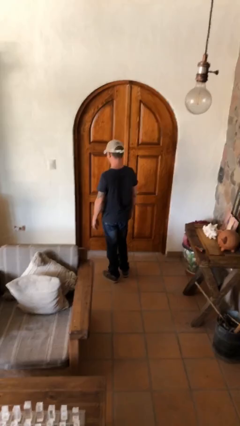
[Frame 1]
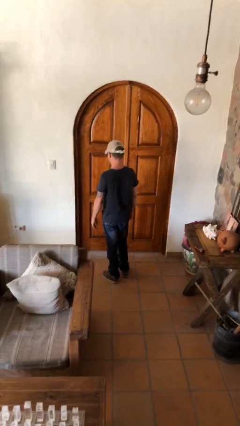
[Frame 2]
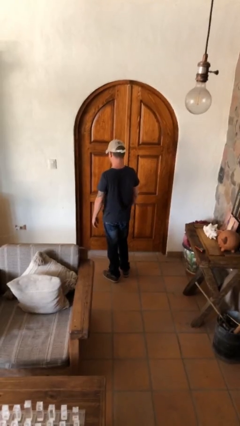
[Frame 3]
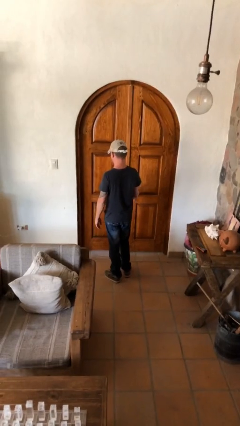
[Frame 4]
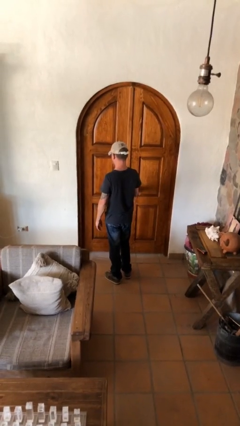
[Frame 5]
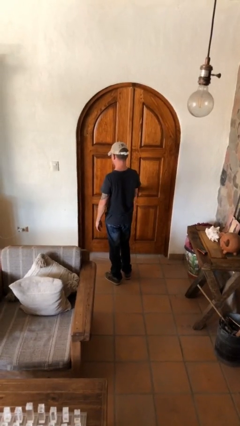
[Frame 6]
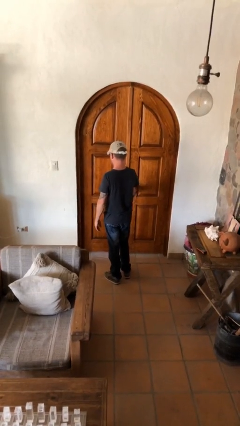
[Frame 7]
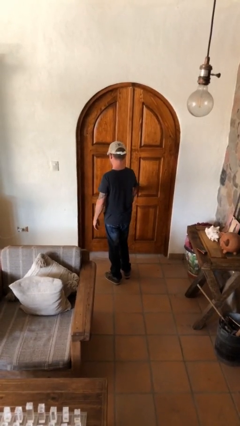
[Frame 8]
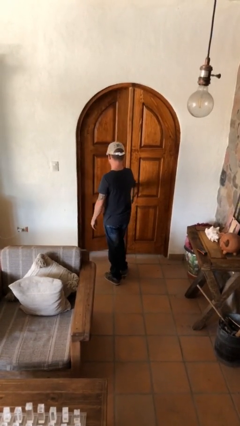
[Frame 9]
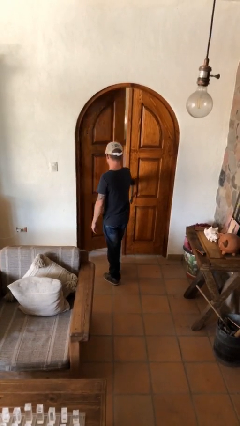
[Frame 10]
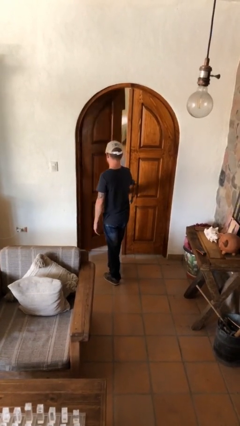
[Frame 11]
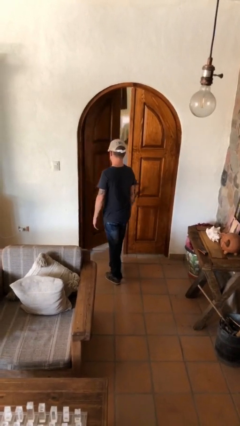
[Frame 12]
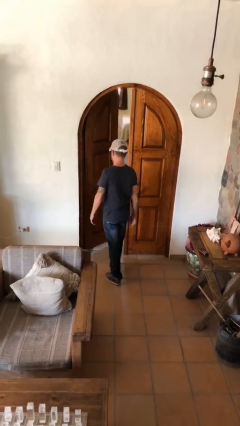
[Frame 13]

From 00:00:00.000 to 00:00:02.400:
person opens facility door

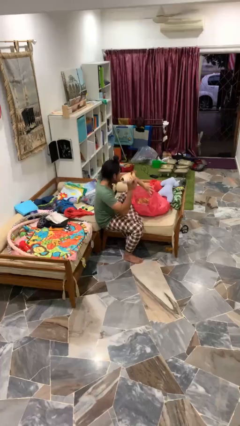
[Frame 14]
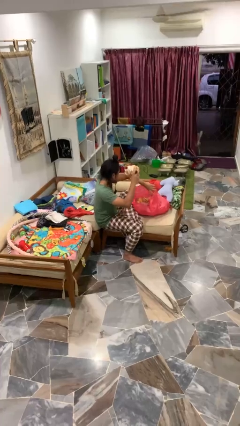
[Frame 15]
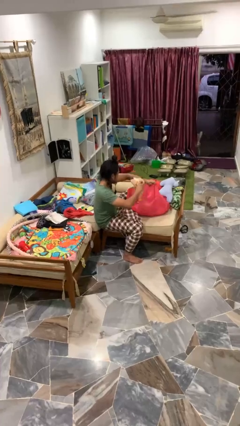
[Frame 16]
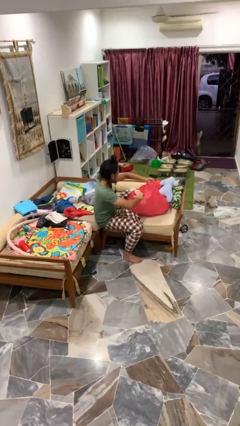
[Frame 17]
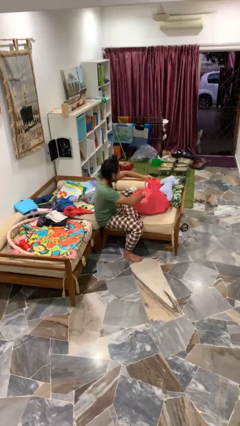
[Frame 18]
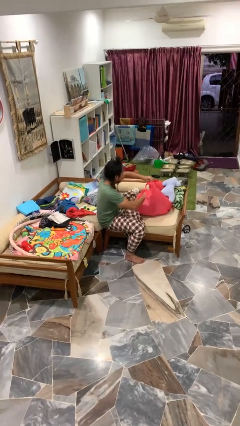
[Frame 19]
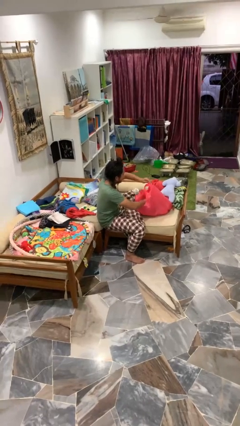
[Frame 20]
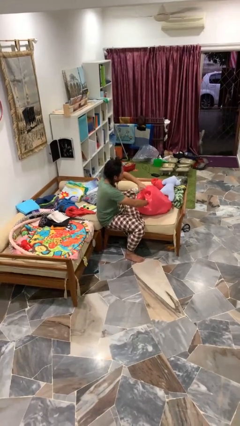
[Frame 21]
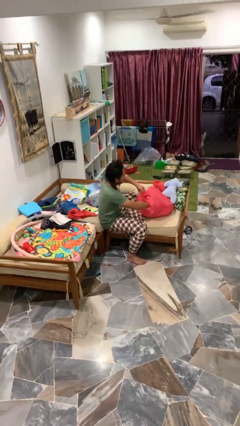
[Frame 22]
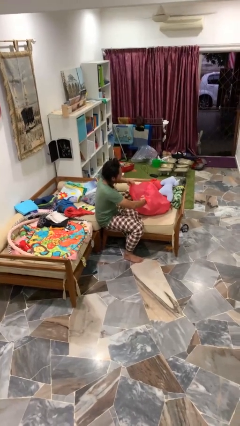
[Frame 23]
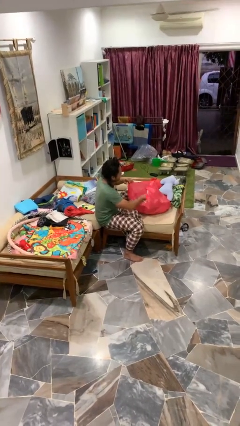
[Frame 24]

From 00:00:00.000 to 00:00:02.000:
person puts object into bag

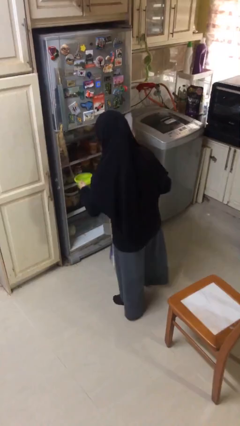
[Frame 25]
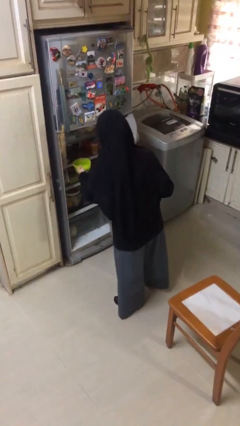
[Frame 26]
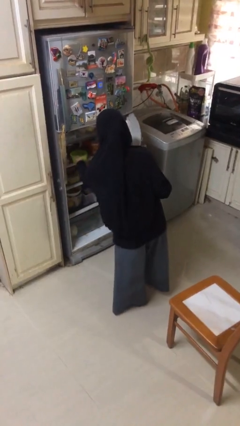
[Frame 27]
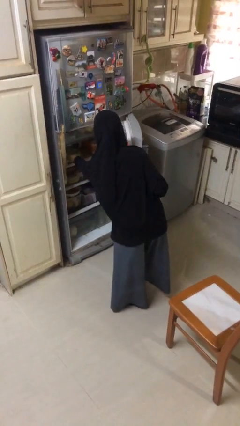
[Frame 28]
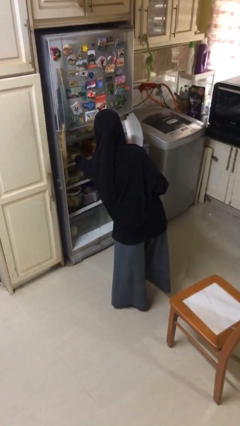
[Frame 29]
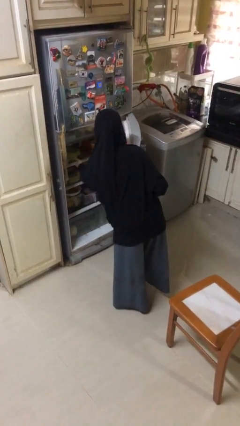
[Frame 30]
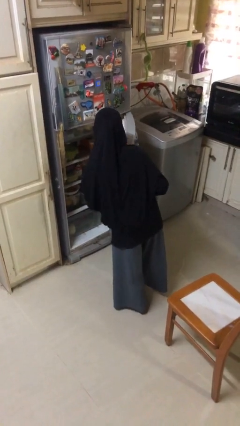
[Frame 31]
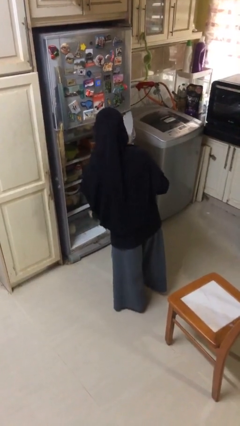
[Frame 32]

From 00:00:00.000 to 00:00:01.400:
person puts object into refrigerator

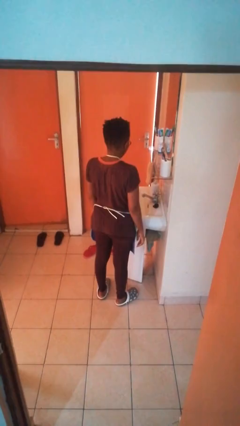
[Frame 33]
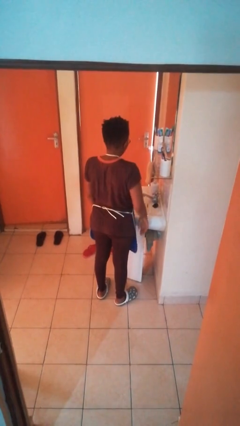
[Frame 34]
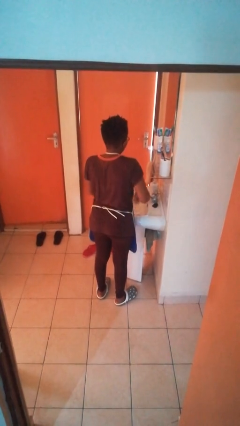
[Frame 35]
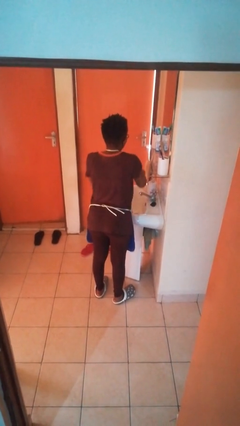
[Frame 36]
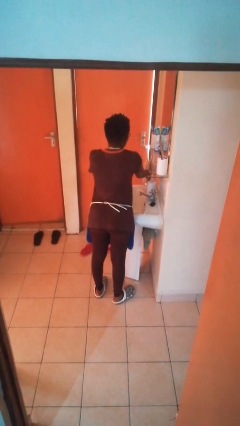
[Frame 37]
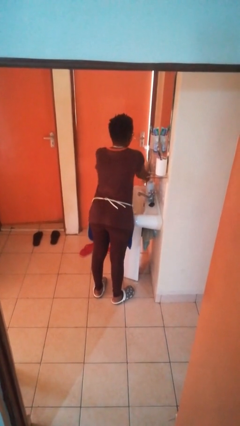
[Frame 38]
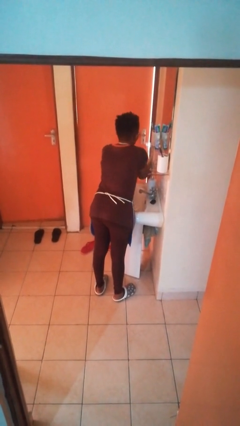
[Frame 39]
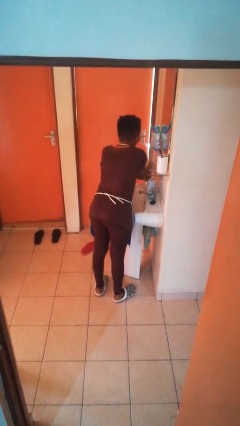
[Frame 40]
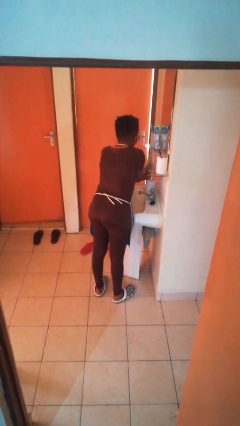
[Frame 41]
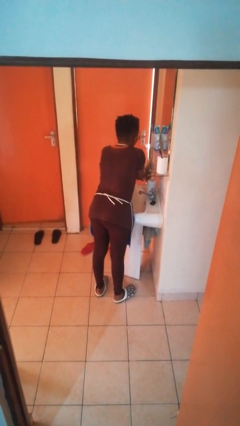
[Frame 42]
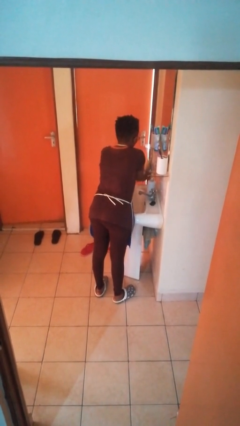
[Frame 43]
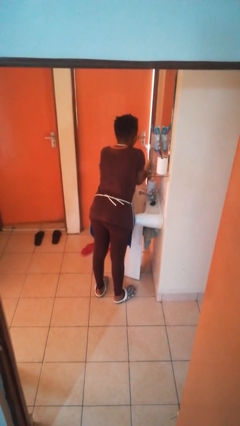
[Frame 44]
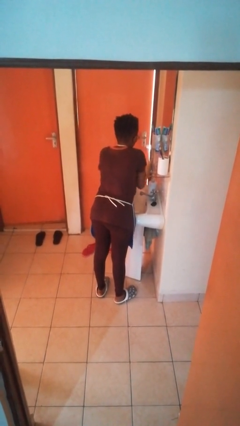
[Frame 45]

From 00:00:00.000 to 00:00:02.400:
person dries hands with towel

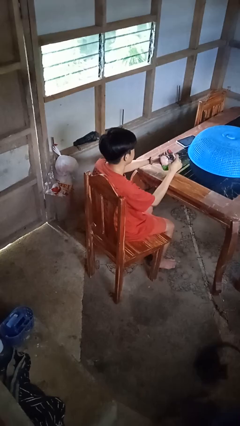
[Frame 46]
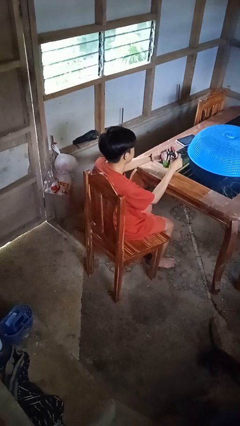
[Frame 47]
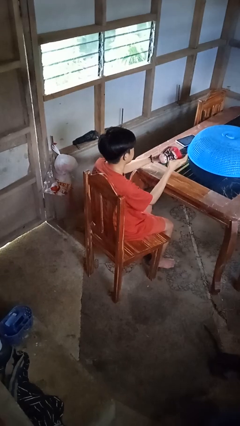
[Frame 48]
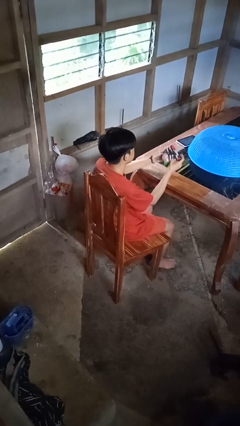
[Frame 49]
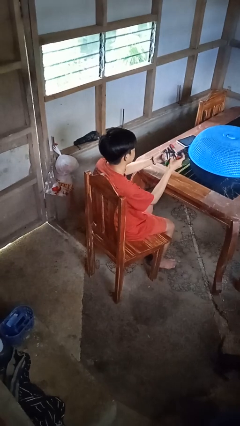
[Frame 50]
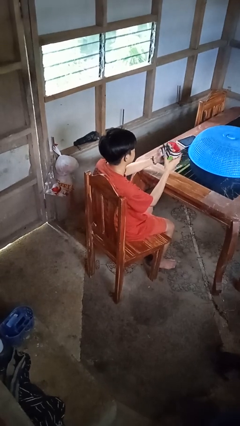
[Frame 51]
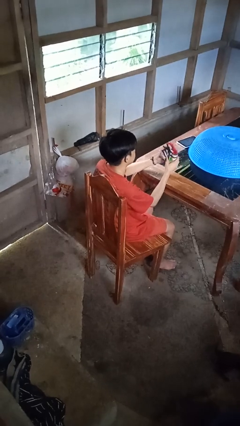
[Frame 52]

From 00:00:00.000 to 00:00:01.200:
person squeezes object

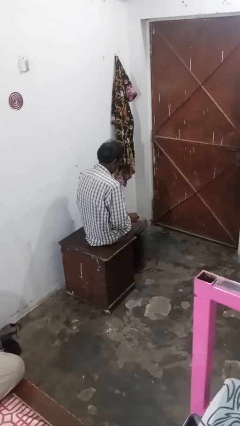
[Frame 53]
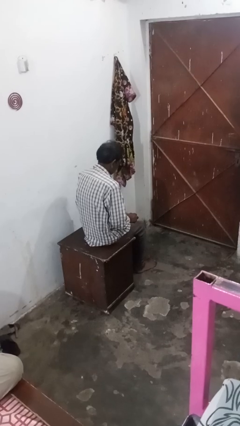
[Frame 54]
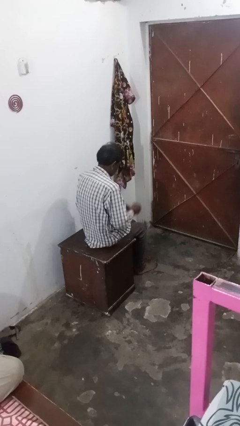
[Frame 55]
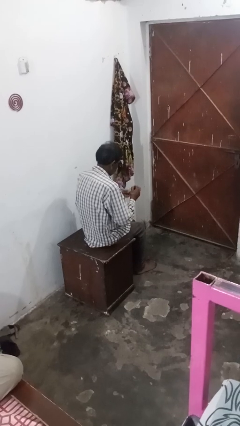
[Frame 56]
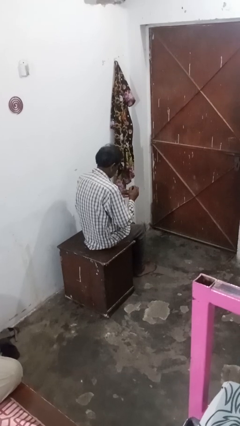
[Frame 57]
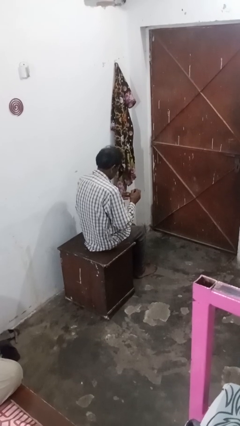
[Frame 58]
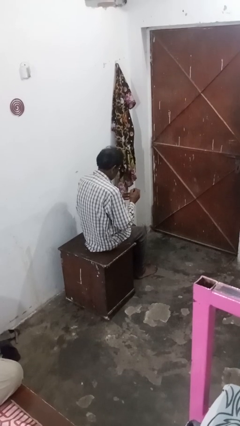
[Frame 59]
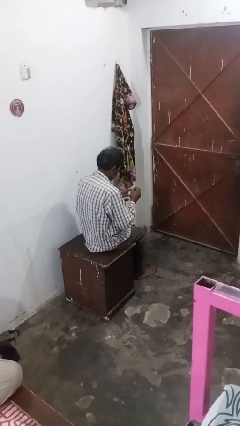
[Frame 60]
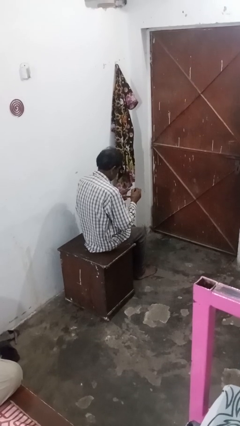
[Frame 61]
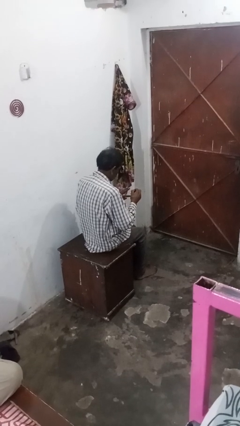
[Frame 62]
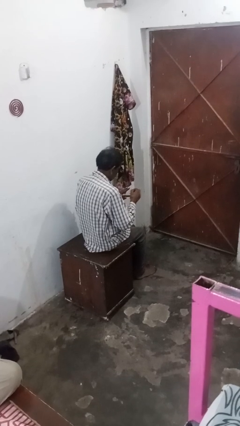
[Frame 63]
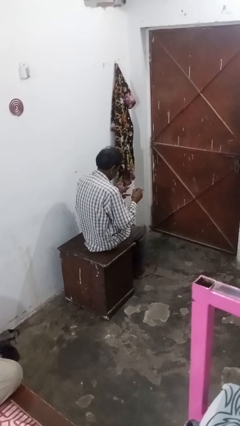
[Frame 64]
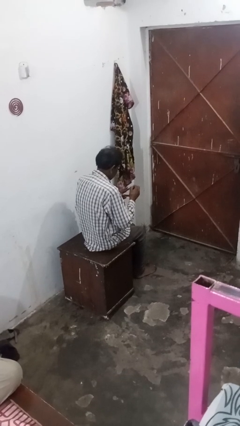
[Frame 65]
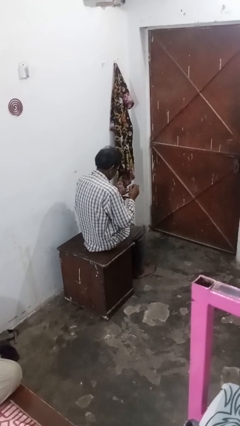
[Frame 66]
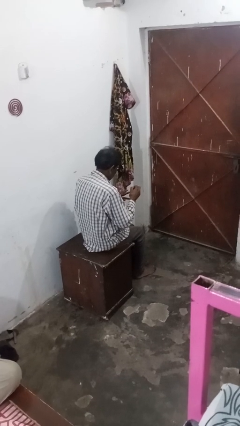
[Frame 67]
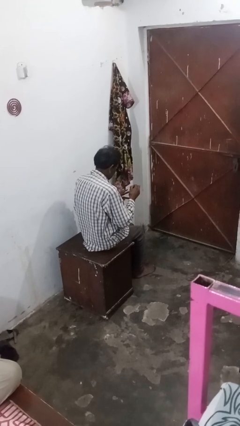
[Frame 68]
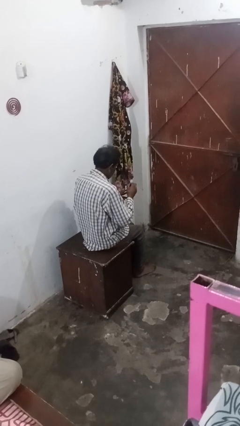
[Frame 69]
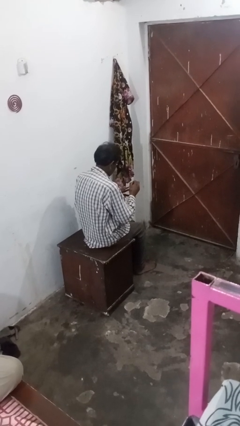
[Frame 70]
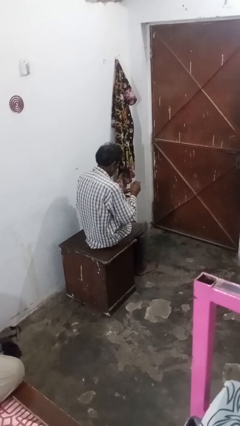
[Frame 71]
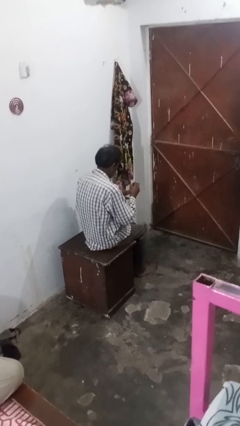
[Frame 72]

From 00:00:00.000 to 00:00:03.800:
person paints fingernails

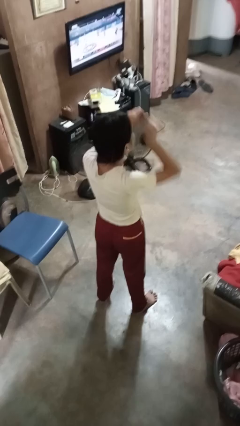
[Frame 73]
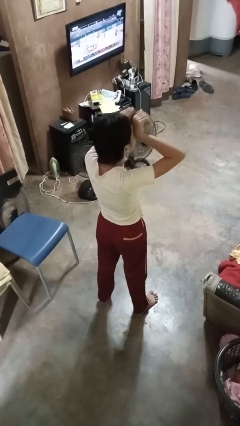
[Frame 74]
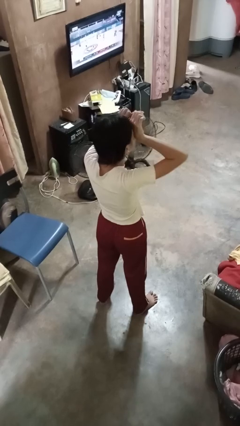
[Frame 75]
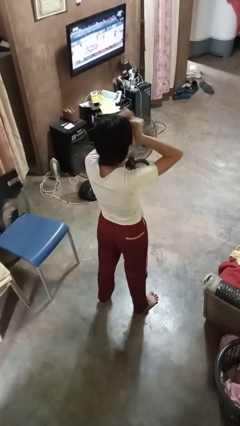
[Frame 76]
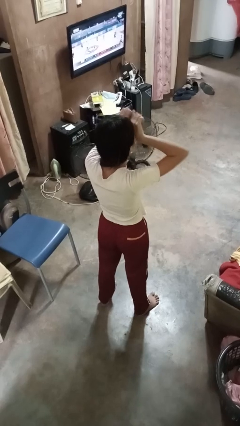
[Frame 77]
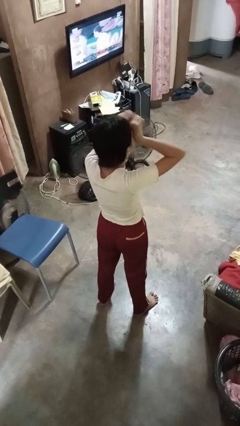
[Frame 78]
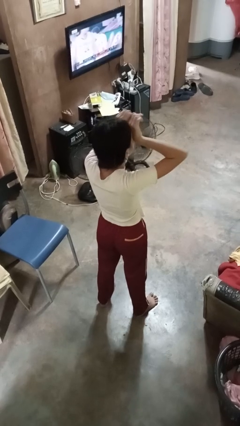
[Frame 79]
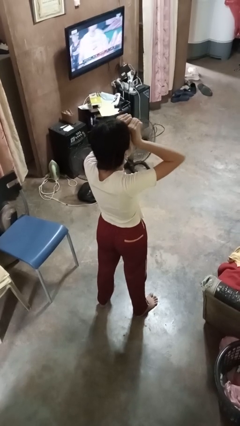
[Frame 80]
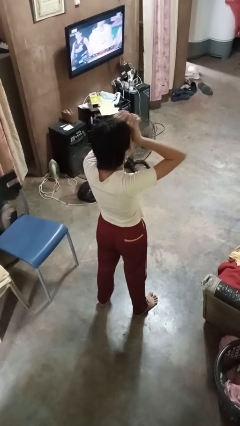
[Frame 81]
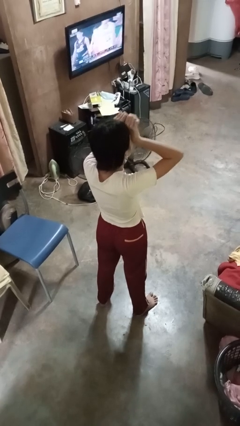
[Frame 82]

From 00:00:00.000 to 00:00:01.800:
person rubs eyes

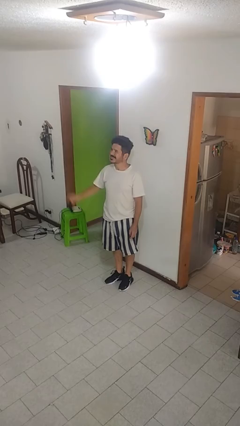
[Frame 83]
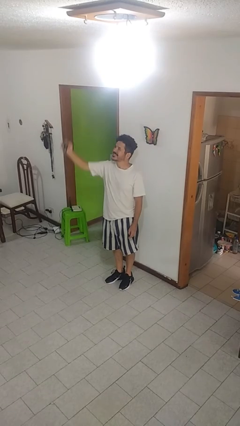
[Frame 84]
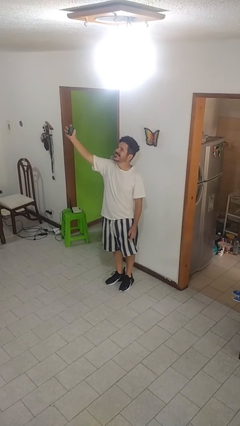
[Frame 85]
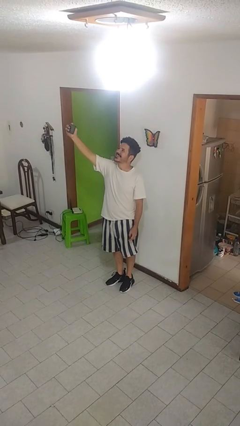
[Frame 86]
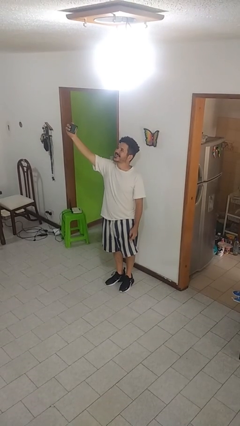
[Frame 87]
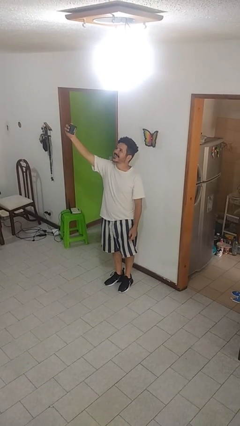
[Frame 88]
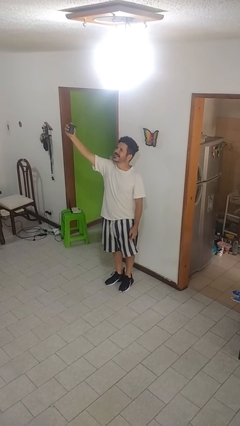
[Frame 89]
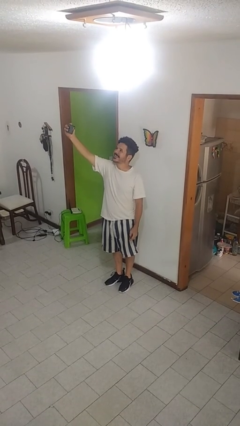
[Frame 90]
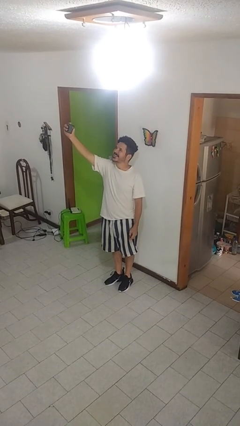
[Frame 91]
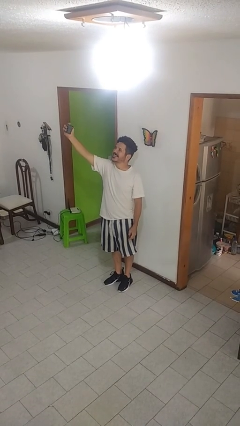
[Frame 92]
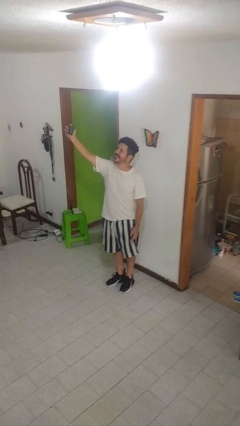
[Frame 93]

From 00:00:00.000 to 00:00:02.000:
person takes selfie
